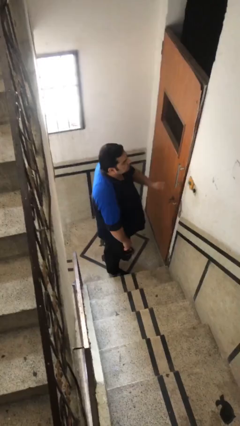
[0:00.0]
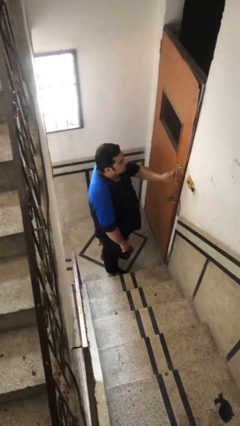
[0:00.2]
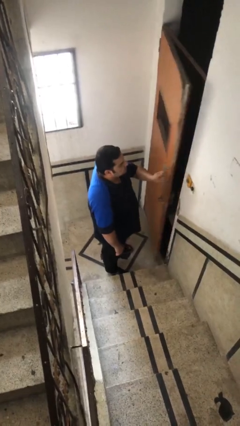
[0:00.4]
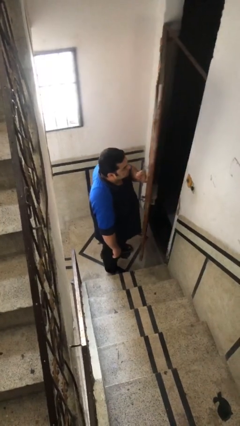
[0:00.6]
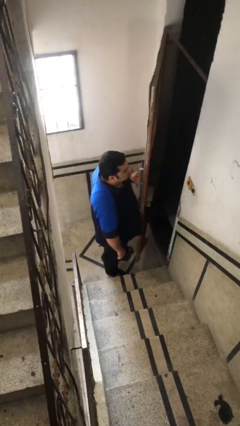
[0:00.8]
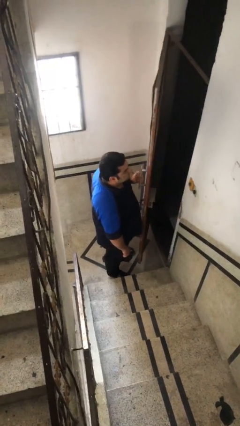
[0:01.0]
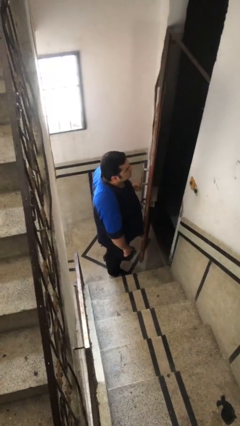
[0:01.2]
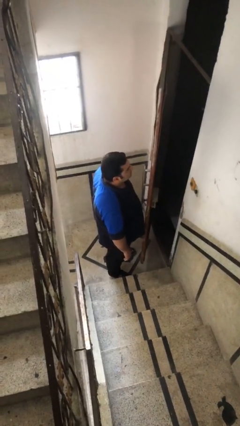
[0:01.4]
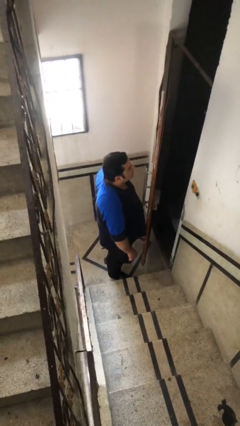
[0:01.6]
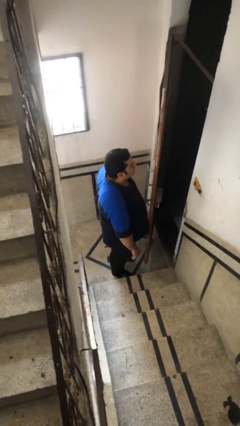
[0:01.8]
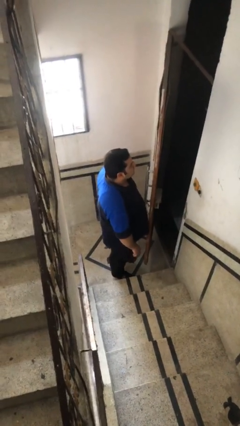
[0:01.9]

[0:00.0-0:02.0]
person opens facility door

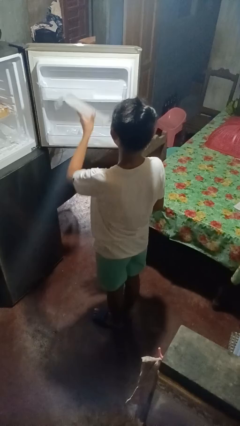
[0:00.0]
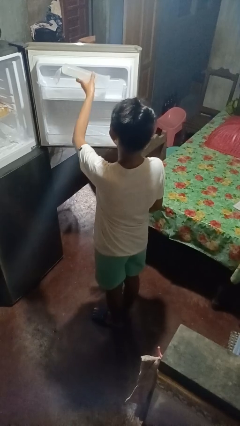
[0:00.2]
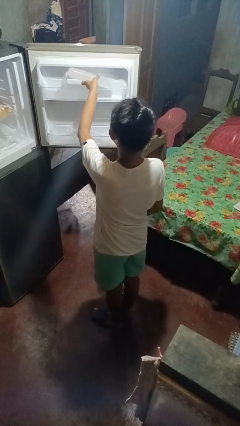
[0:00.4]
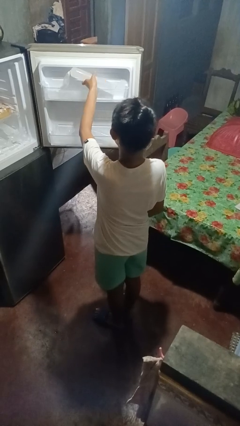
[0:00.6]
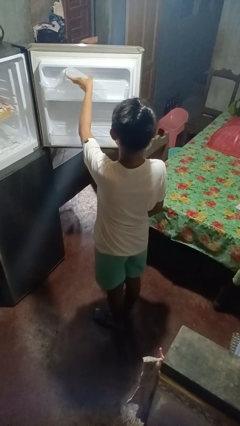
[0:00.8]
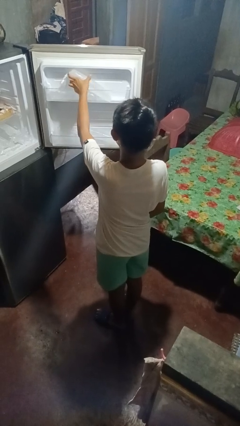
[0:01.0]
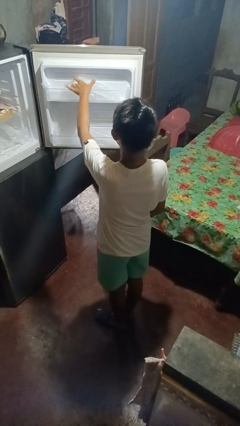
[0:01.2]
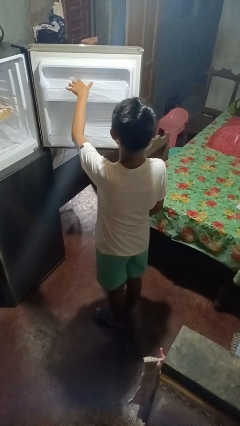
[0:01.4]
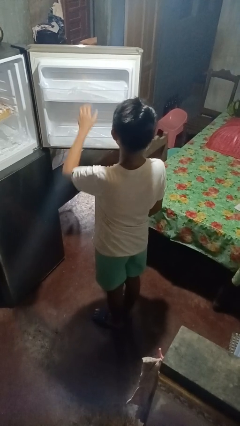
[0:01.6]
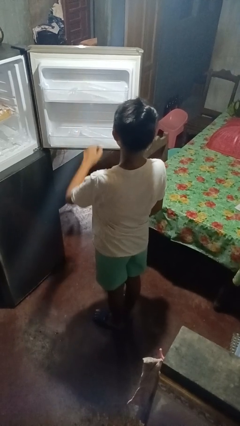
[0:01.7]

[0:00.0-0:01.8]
person puts object into refrigerator

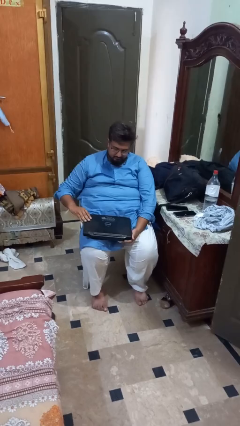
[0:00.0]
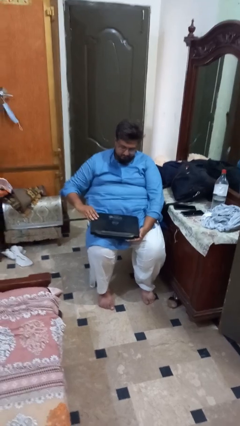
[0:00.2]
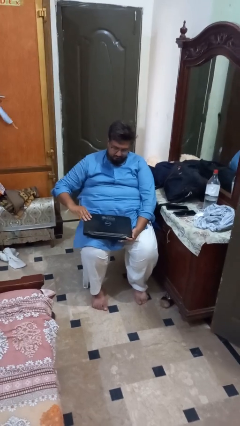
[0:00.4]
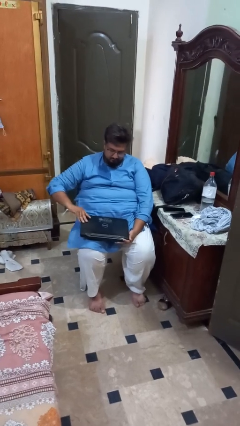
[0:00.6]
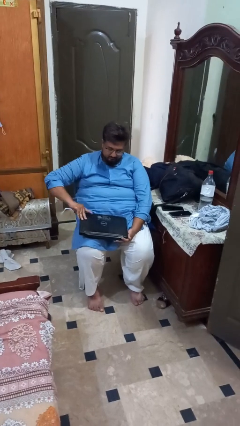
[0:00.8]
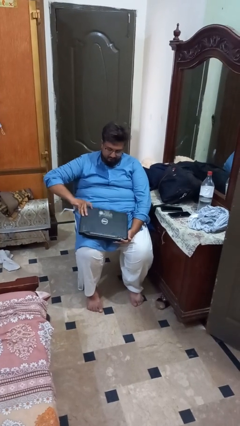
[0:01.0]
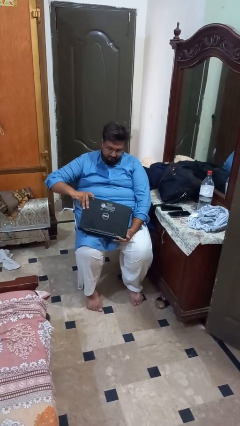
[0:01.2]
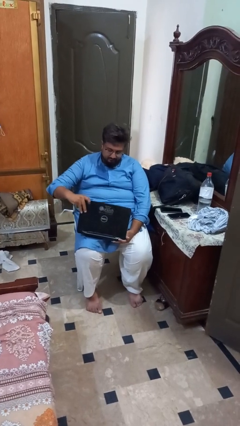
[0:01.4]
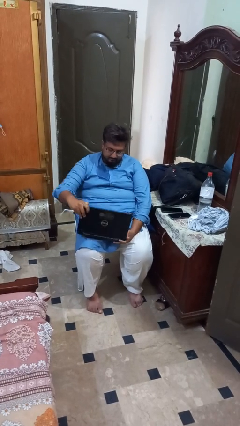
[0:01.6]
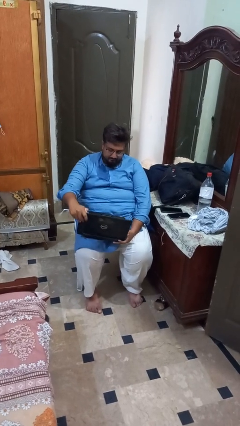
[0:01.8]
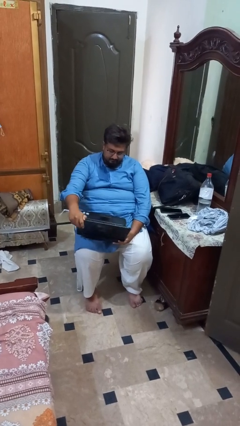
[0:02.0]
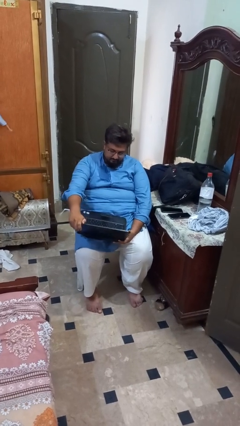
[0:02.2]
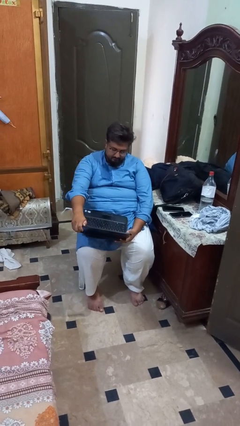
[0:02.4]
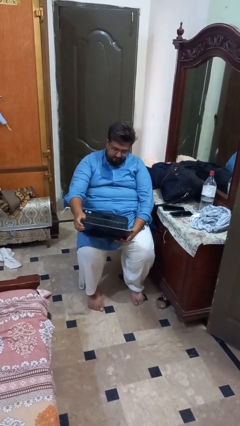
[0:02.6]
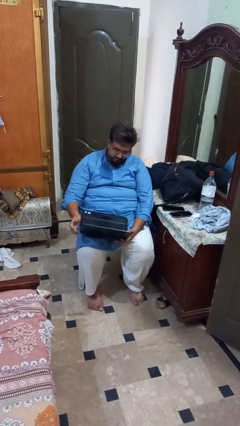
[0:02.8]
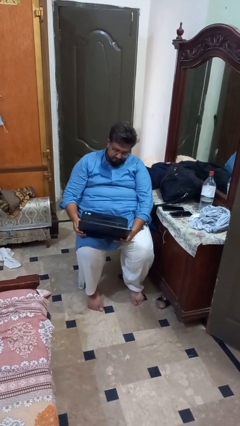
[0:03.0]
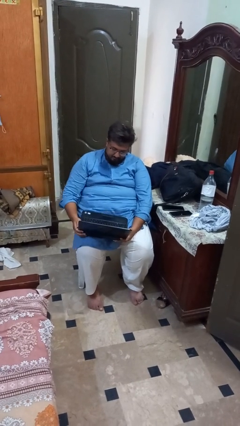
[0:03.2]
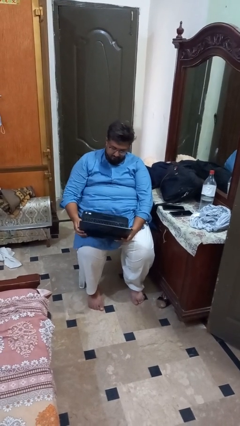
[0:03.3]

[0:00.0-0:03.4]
person opens laptop

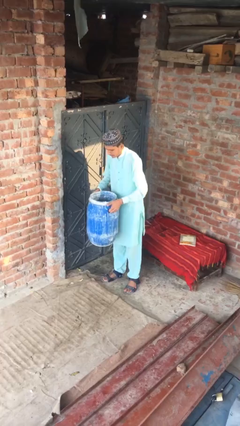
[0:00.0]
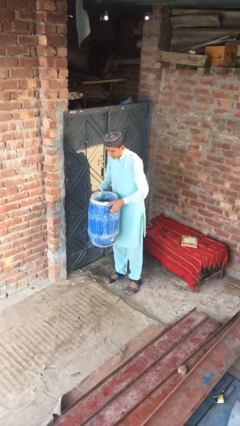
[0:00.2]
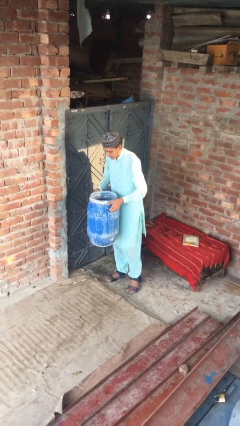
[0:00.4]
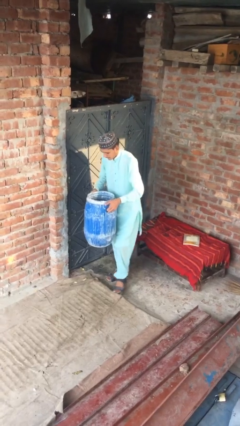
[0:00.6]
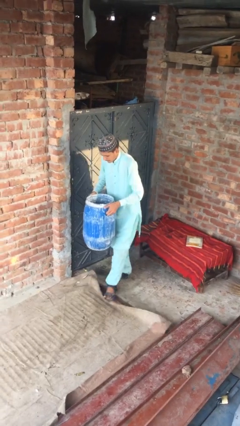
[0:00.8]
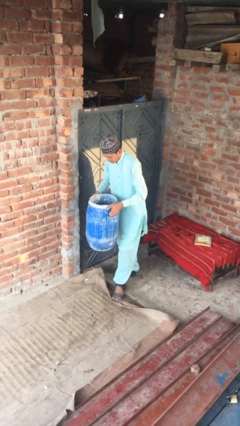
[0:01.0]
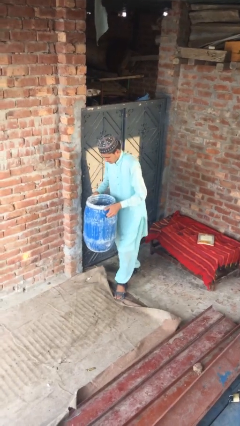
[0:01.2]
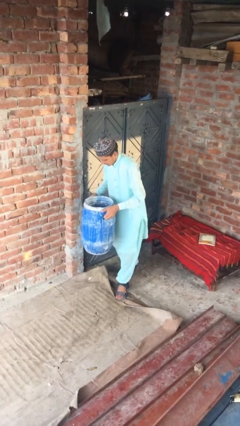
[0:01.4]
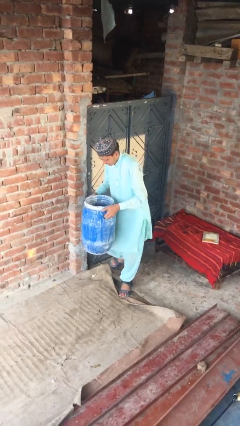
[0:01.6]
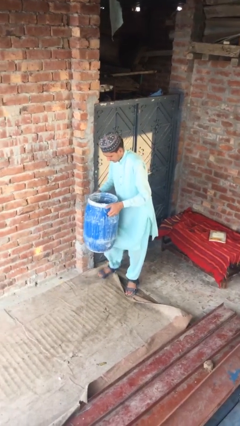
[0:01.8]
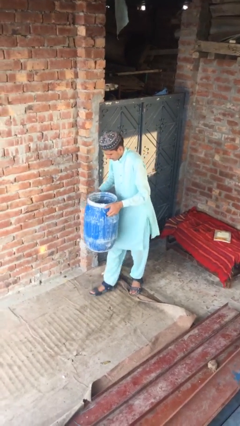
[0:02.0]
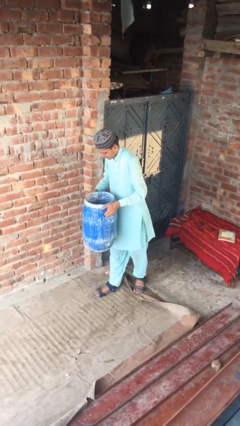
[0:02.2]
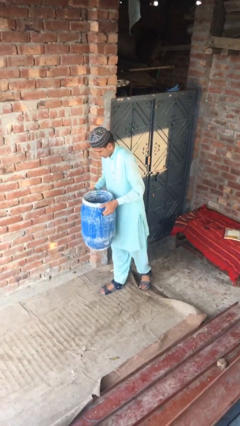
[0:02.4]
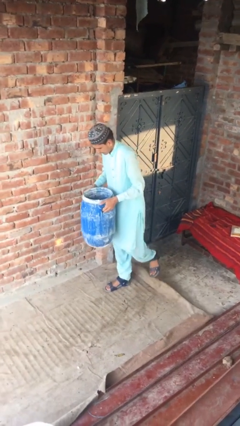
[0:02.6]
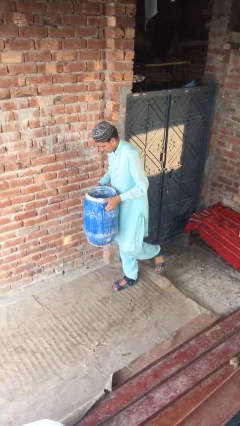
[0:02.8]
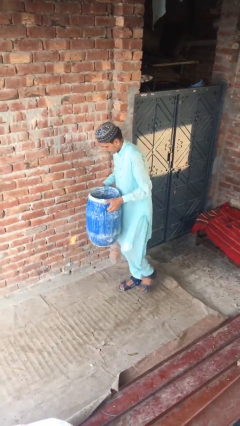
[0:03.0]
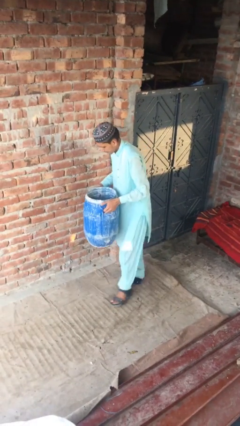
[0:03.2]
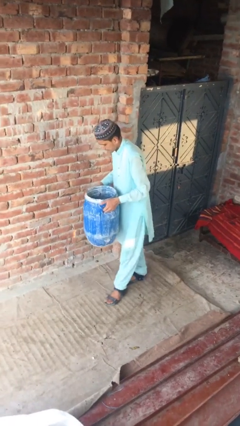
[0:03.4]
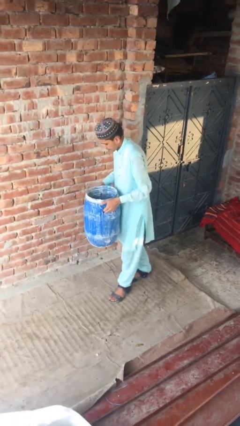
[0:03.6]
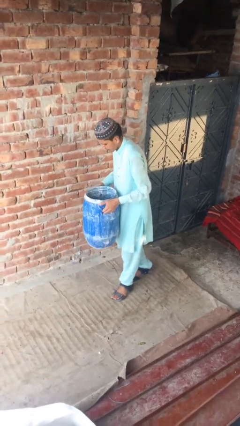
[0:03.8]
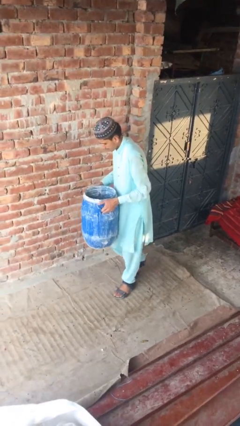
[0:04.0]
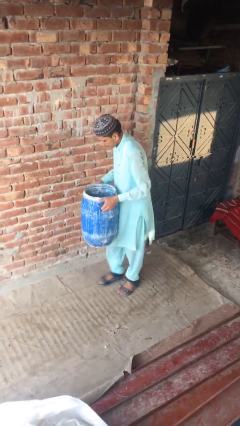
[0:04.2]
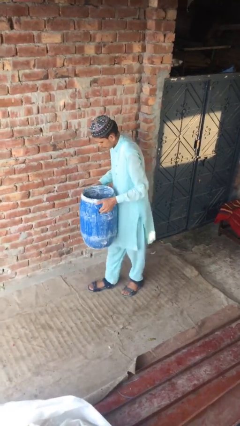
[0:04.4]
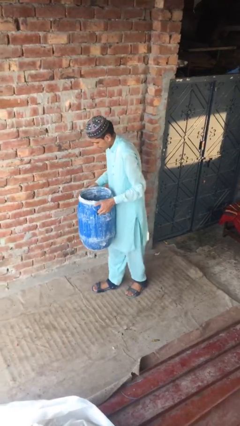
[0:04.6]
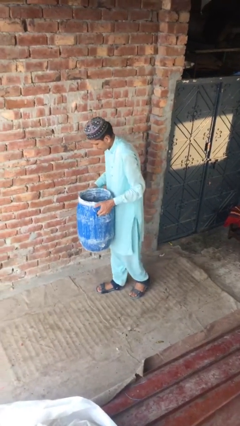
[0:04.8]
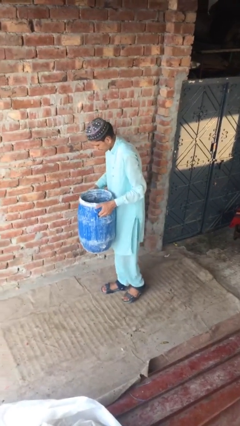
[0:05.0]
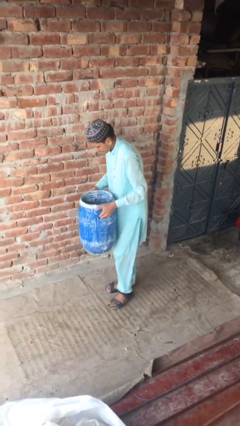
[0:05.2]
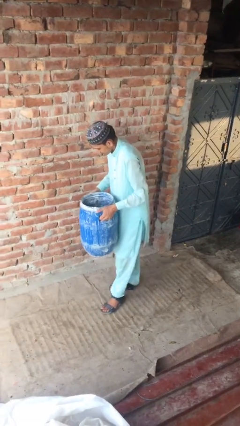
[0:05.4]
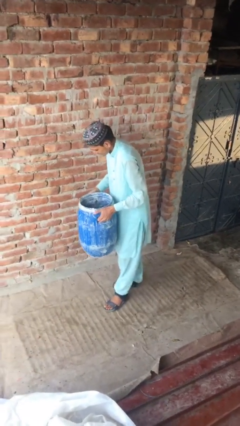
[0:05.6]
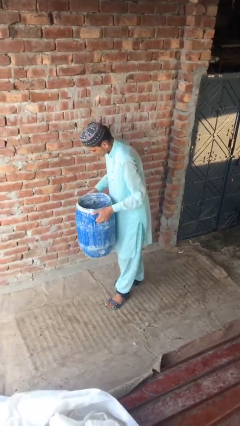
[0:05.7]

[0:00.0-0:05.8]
person carries heavy object

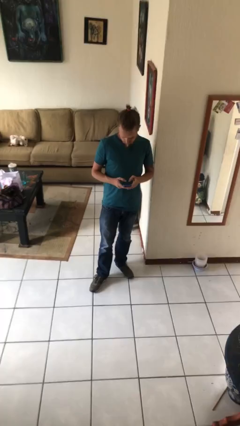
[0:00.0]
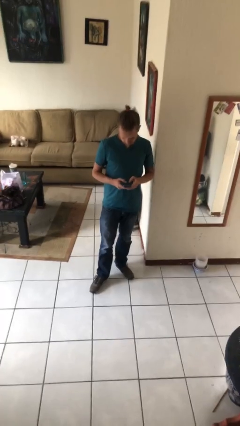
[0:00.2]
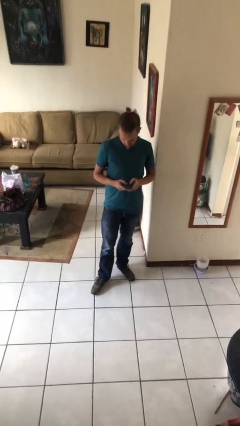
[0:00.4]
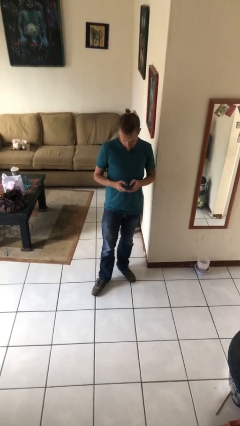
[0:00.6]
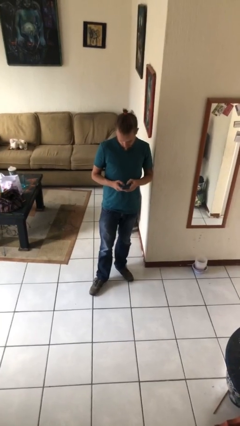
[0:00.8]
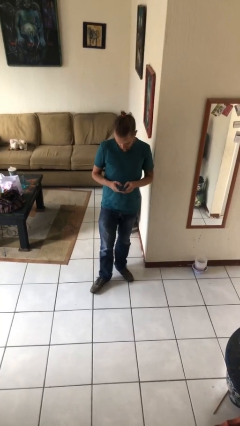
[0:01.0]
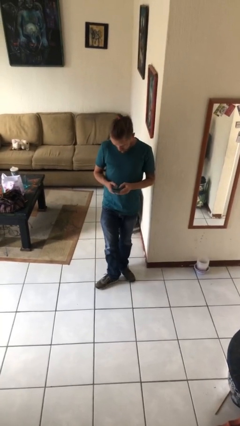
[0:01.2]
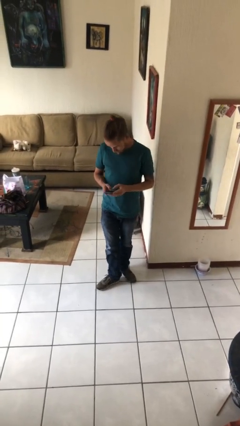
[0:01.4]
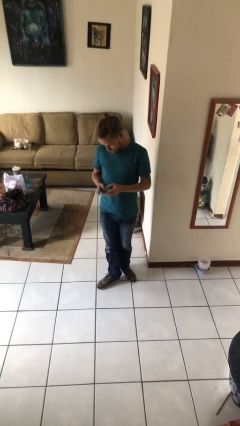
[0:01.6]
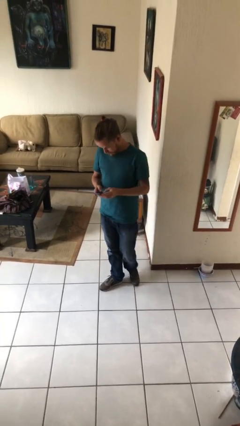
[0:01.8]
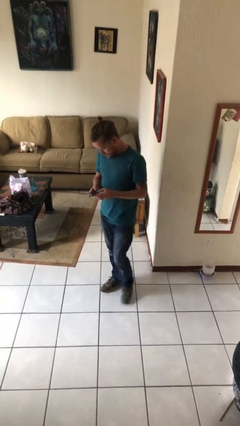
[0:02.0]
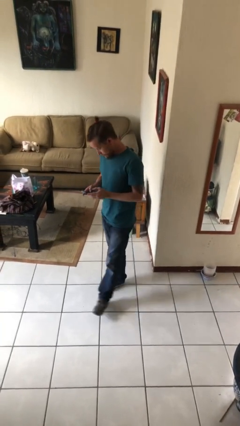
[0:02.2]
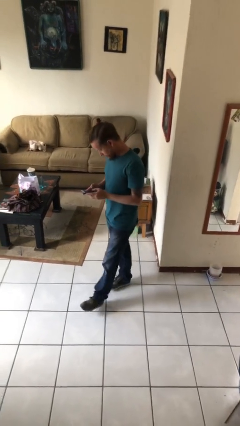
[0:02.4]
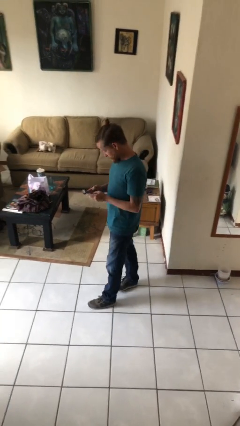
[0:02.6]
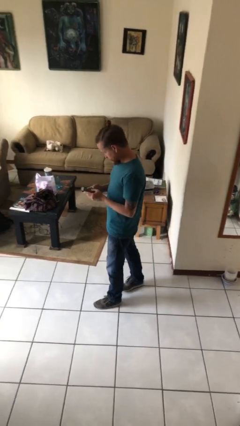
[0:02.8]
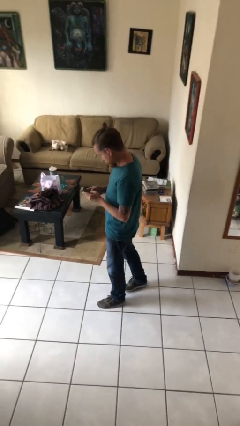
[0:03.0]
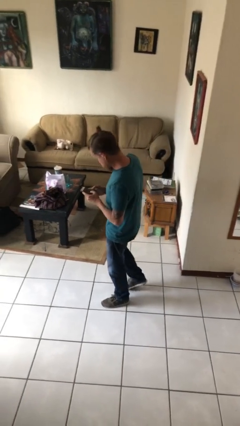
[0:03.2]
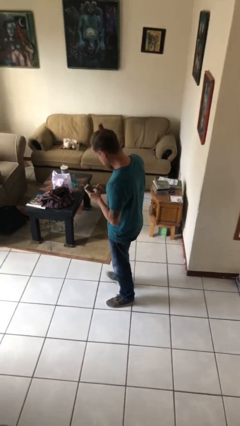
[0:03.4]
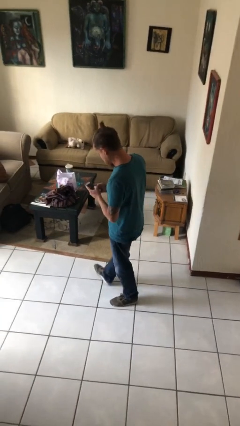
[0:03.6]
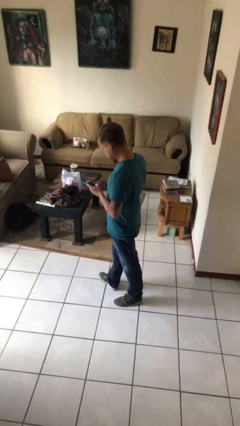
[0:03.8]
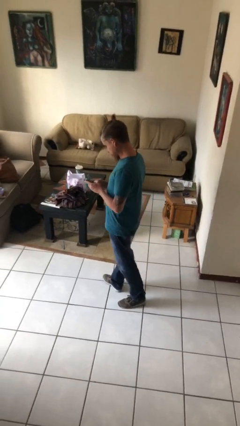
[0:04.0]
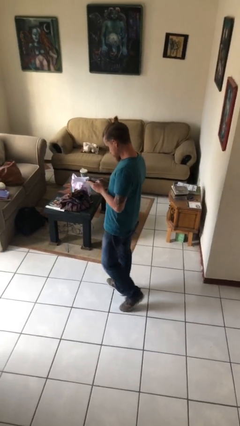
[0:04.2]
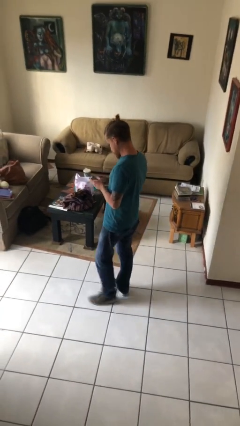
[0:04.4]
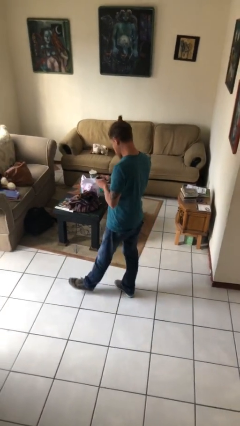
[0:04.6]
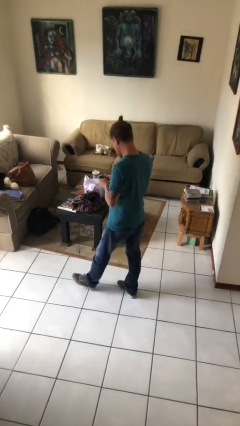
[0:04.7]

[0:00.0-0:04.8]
person texts on phone
